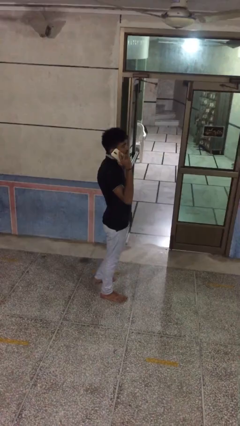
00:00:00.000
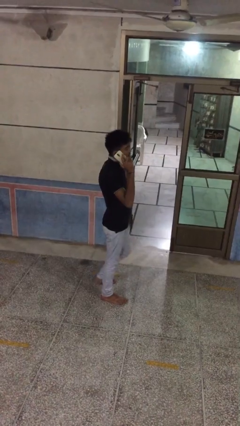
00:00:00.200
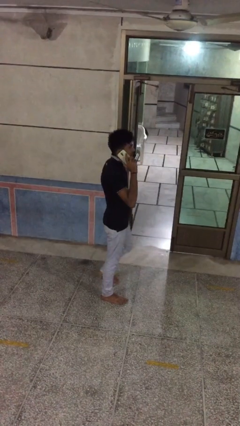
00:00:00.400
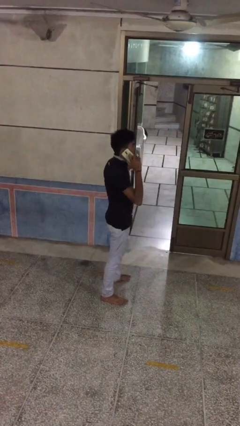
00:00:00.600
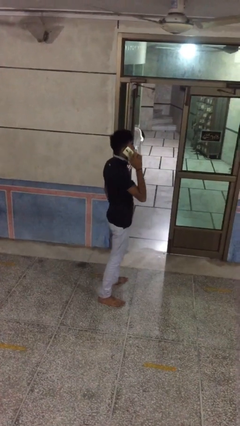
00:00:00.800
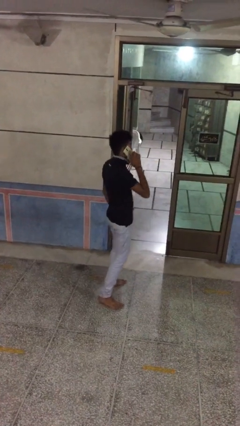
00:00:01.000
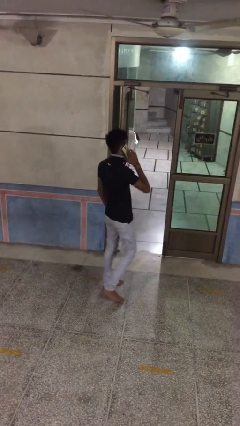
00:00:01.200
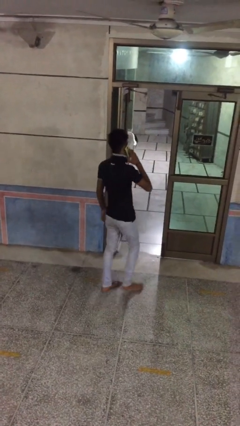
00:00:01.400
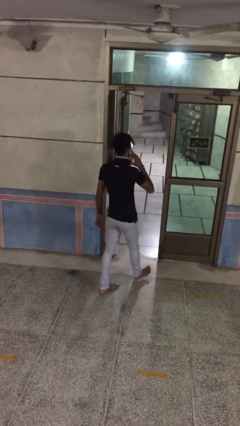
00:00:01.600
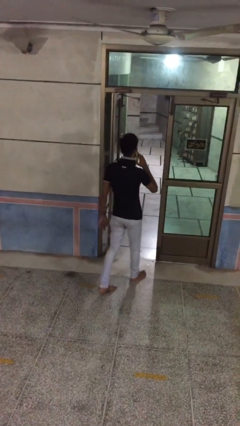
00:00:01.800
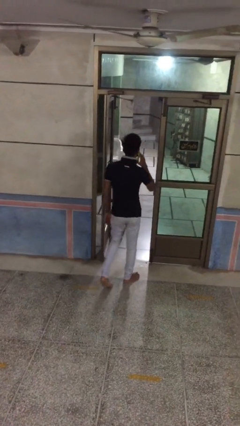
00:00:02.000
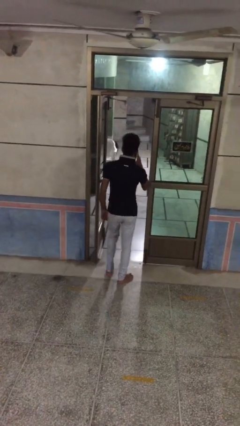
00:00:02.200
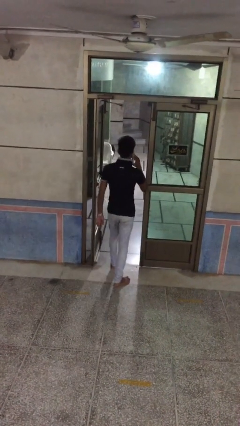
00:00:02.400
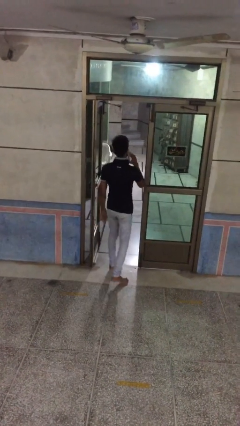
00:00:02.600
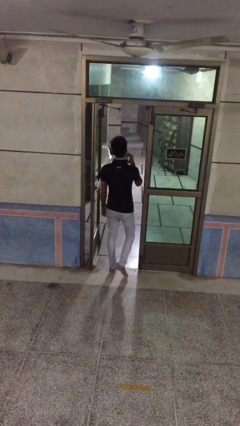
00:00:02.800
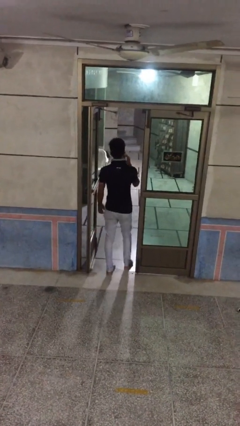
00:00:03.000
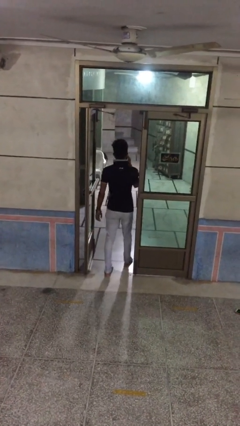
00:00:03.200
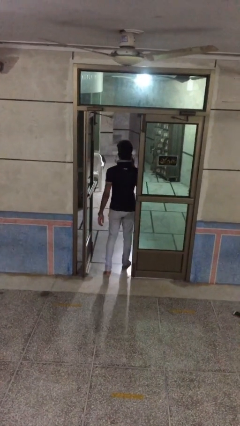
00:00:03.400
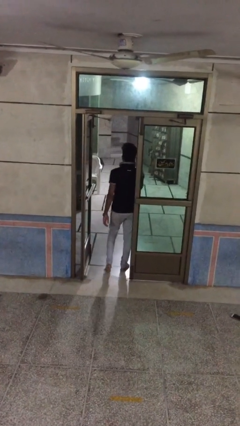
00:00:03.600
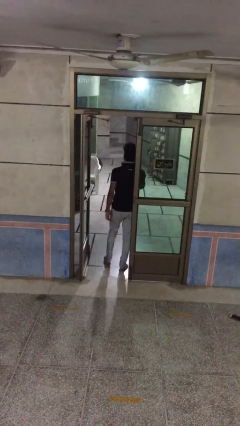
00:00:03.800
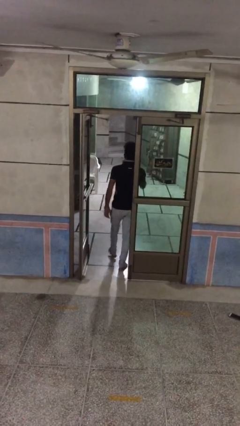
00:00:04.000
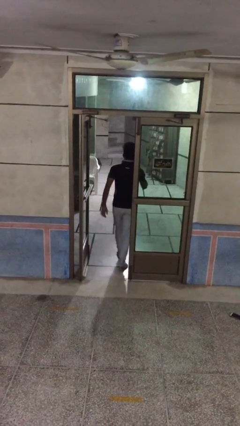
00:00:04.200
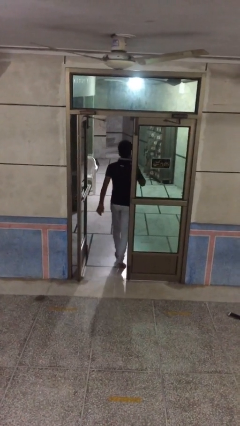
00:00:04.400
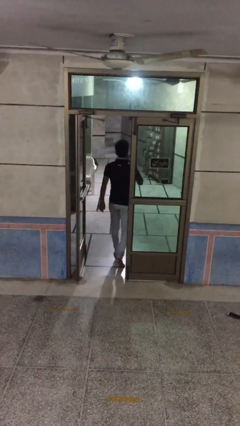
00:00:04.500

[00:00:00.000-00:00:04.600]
person exits scene through structure

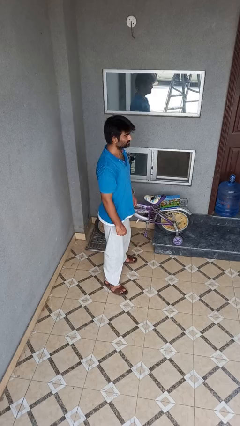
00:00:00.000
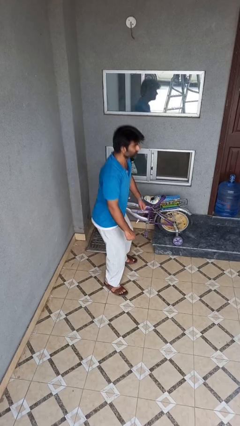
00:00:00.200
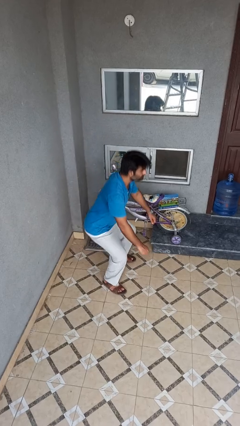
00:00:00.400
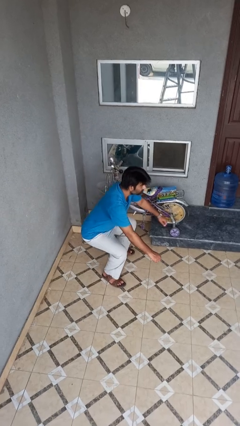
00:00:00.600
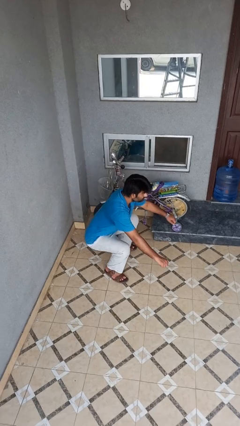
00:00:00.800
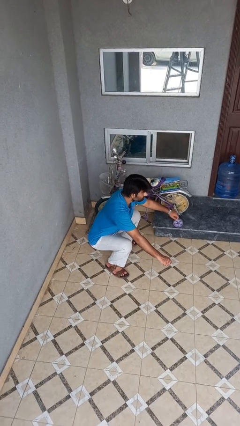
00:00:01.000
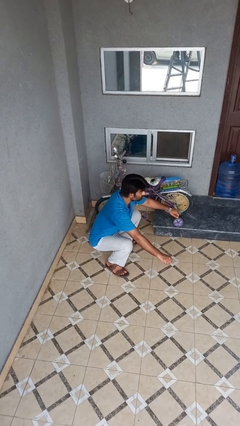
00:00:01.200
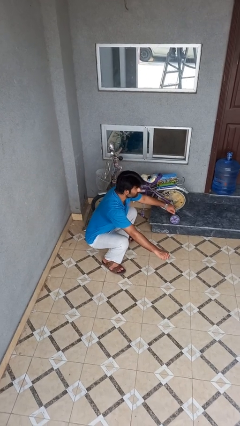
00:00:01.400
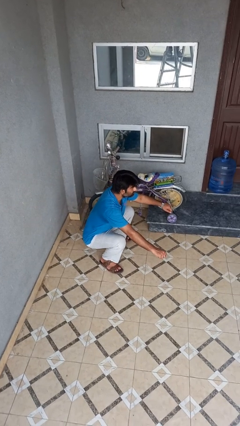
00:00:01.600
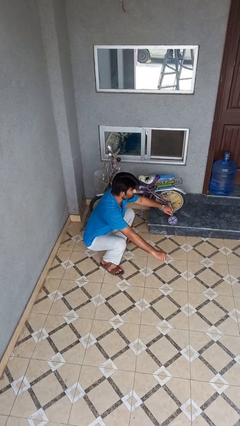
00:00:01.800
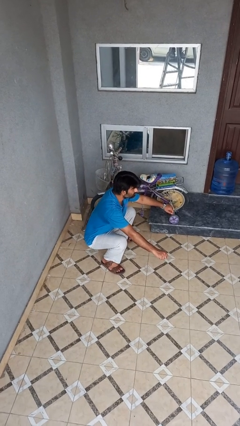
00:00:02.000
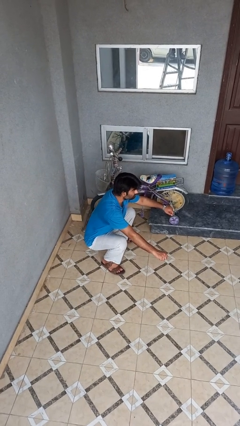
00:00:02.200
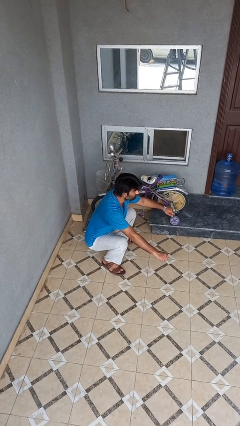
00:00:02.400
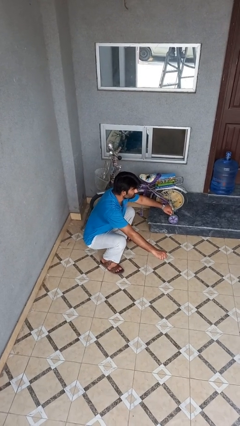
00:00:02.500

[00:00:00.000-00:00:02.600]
person squats

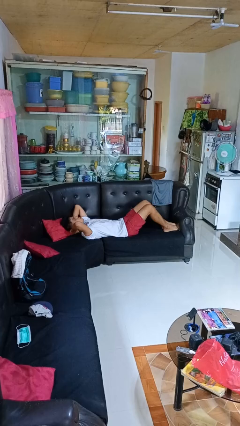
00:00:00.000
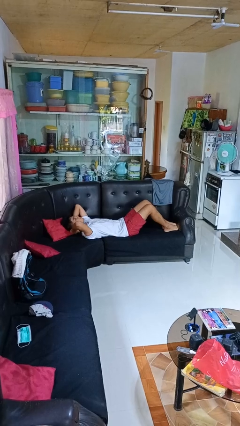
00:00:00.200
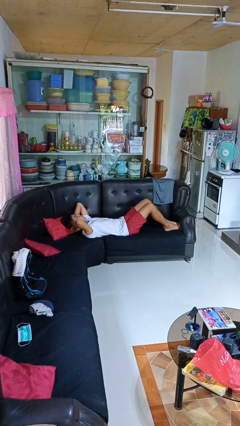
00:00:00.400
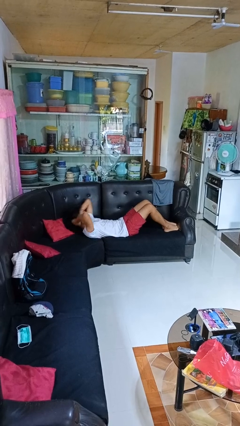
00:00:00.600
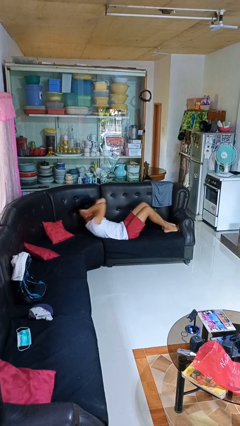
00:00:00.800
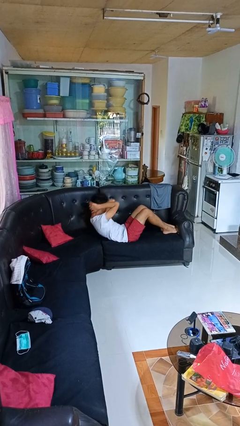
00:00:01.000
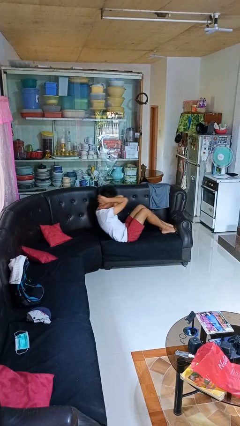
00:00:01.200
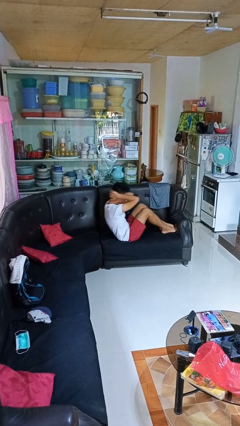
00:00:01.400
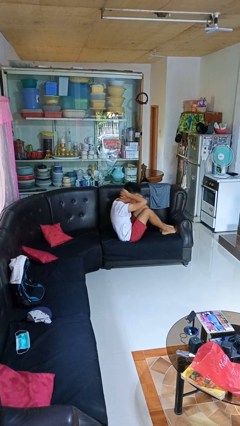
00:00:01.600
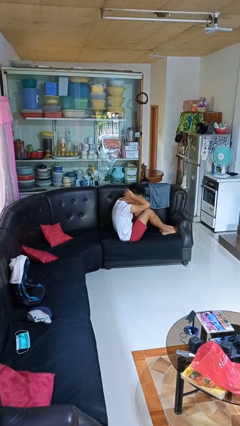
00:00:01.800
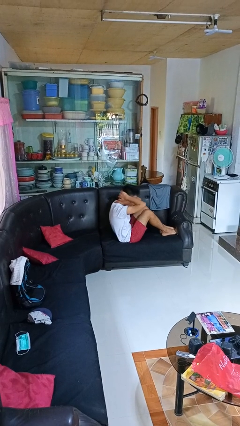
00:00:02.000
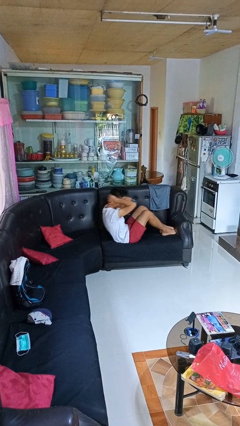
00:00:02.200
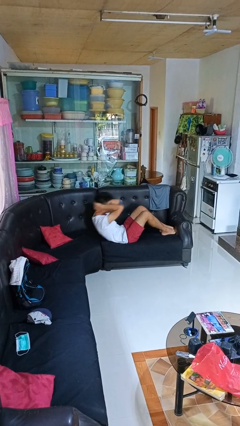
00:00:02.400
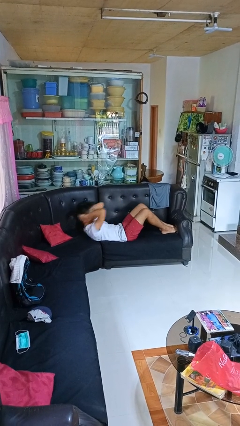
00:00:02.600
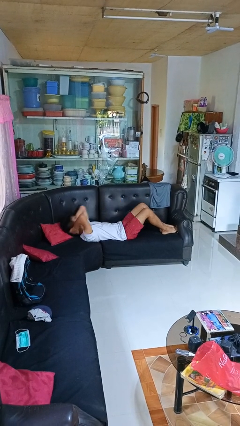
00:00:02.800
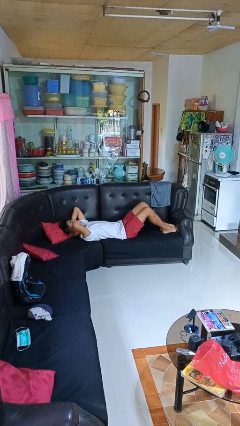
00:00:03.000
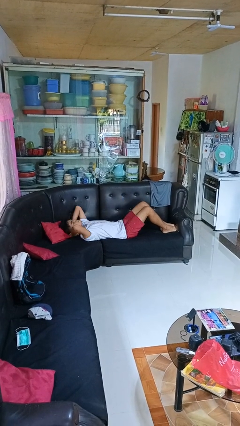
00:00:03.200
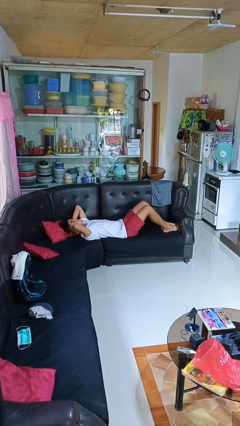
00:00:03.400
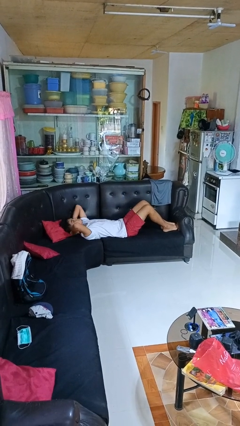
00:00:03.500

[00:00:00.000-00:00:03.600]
person exercises with situp

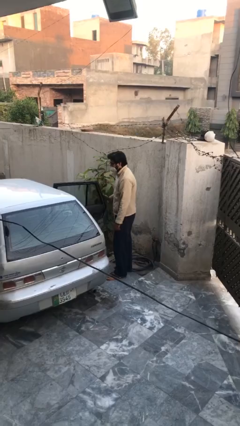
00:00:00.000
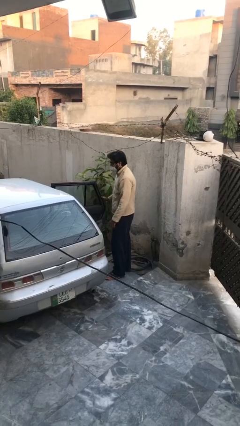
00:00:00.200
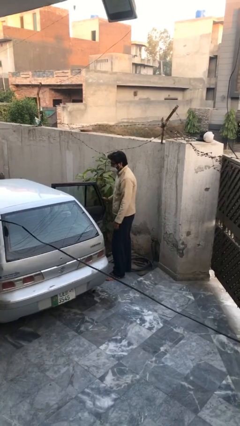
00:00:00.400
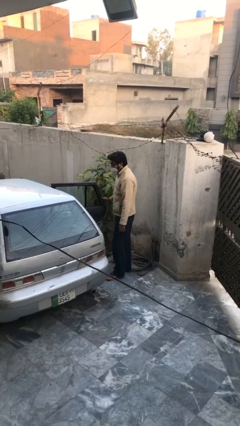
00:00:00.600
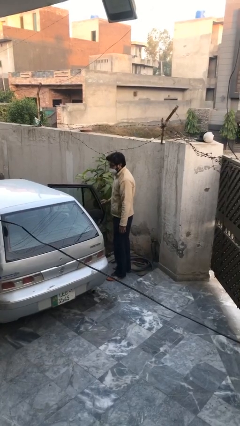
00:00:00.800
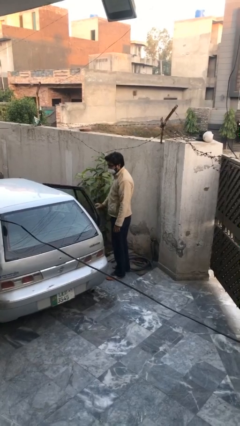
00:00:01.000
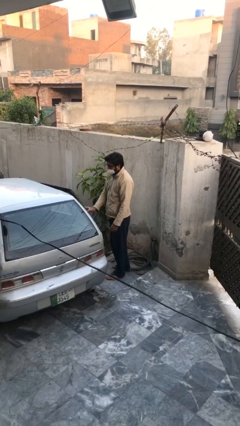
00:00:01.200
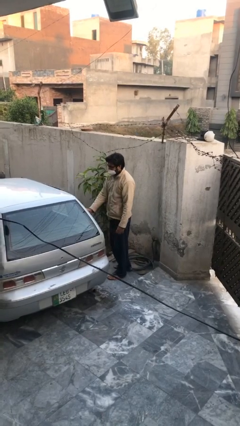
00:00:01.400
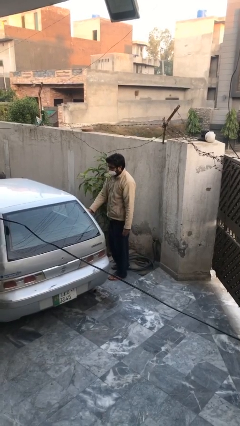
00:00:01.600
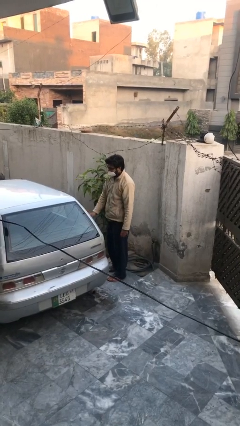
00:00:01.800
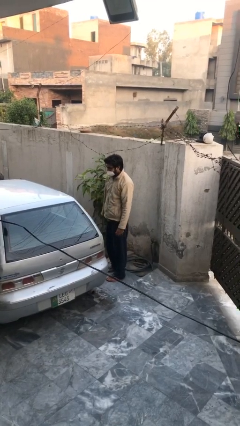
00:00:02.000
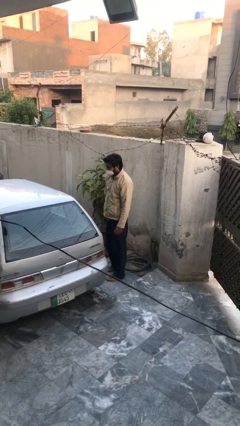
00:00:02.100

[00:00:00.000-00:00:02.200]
person closes car door

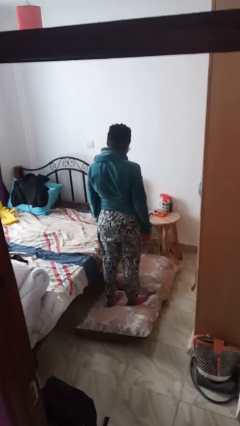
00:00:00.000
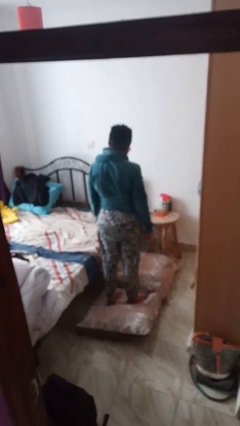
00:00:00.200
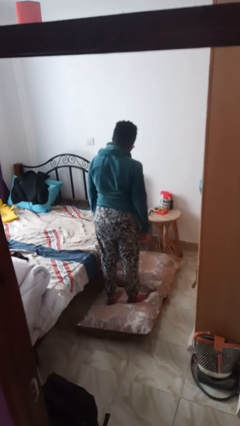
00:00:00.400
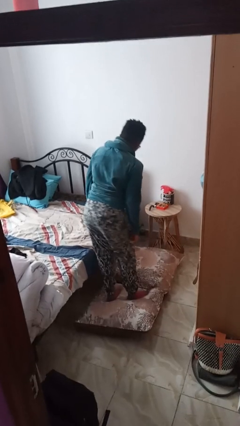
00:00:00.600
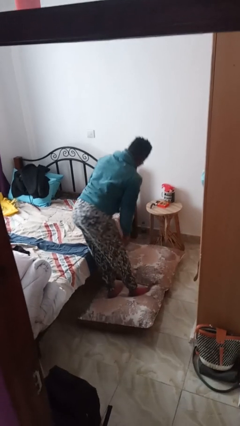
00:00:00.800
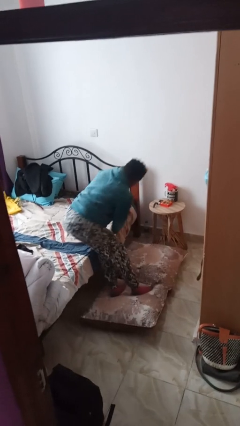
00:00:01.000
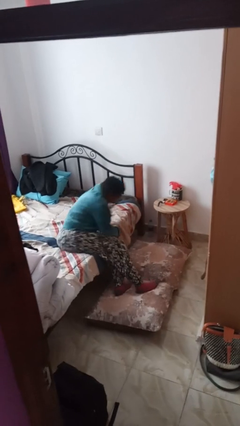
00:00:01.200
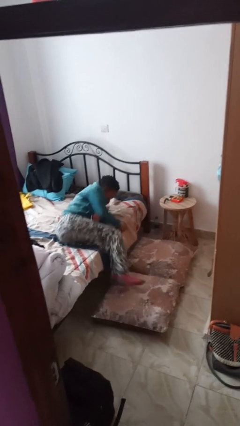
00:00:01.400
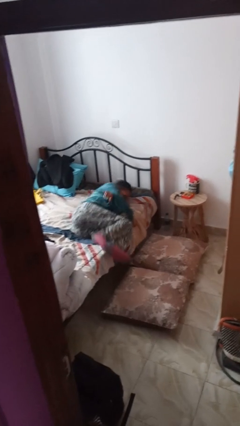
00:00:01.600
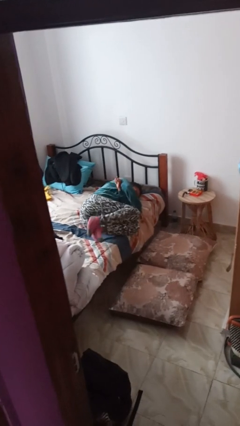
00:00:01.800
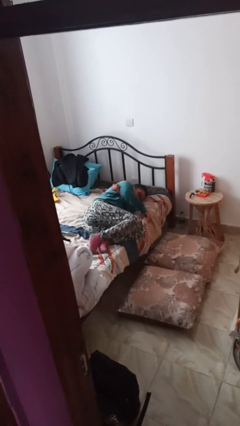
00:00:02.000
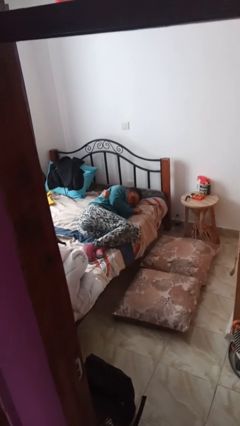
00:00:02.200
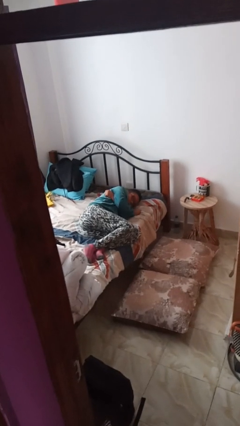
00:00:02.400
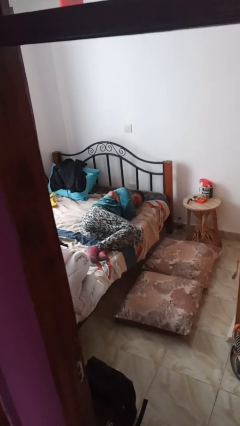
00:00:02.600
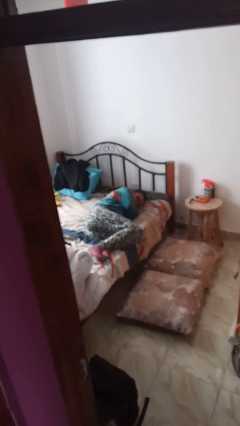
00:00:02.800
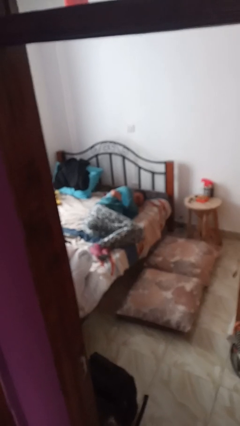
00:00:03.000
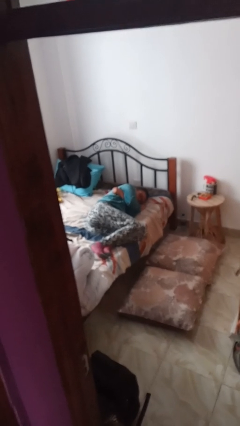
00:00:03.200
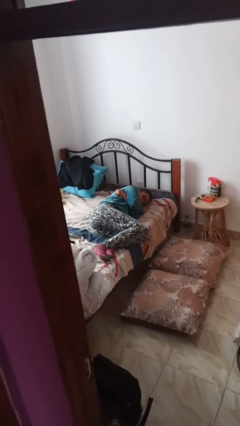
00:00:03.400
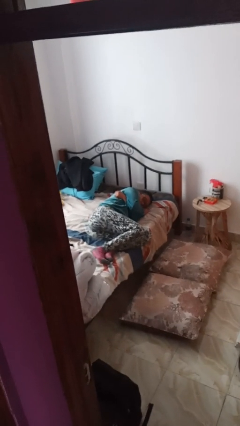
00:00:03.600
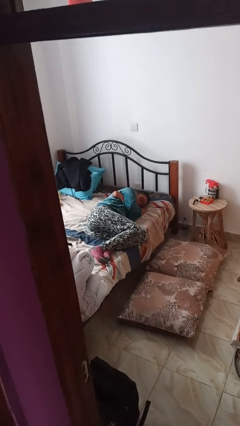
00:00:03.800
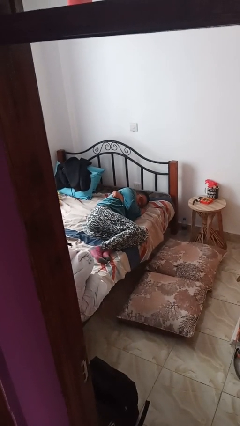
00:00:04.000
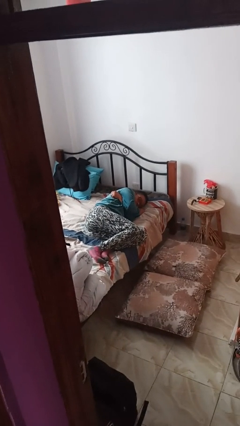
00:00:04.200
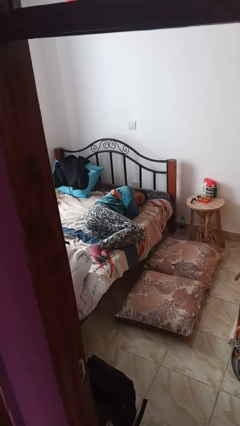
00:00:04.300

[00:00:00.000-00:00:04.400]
person lies down on bed
